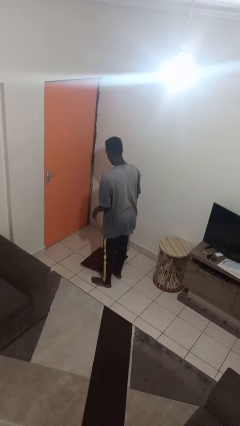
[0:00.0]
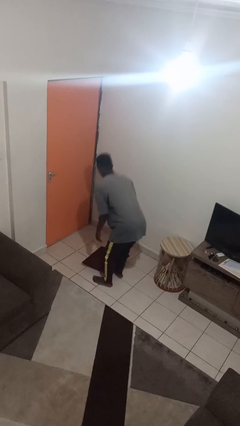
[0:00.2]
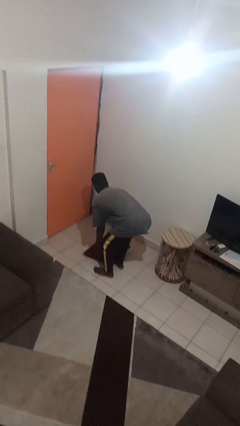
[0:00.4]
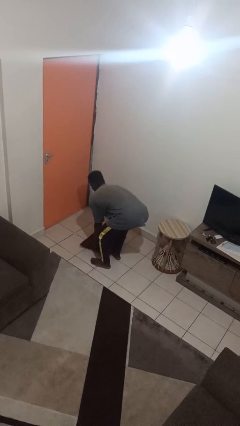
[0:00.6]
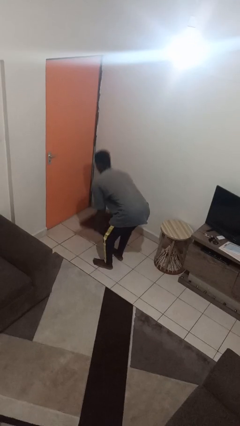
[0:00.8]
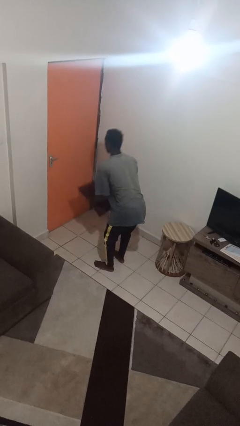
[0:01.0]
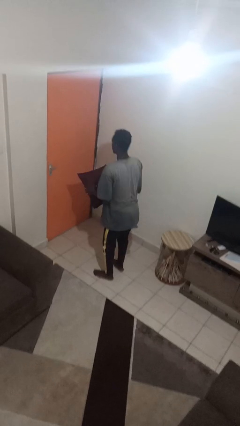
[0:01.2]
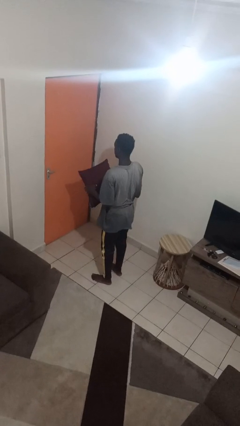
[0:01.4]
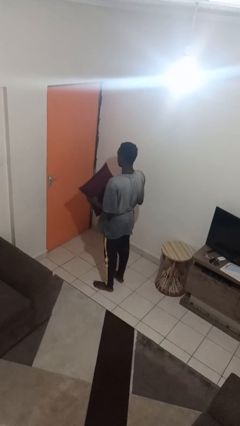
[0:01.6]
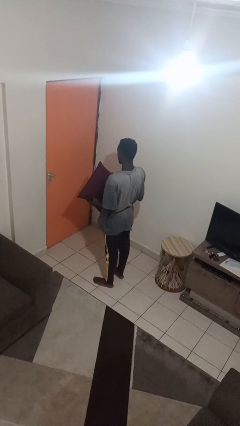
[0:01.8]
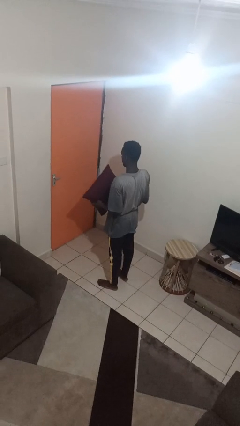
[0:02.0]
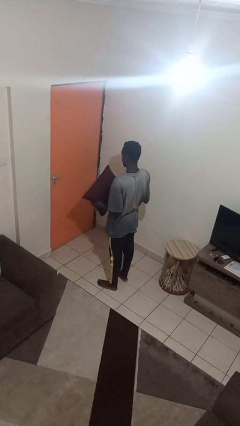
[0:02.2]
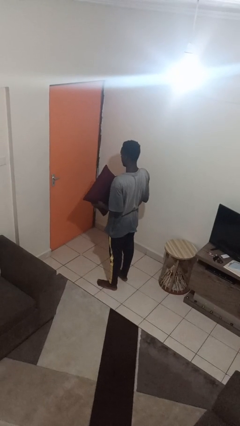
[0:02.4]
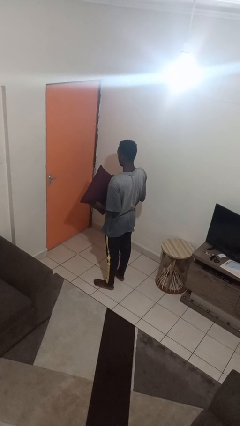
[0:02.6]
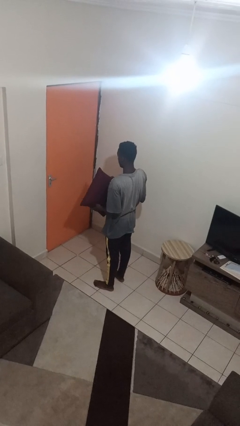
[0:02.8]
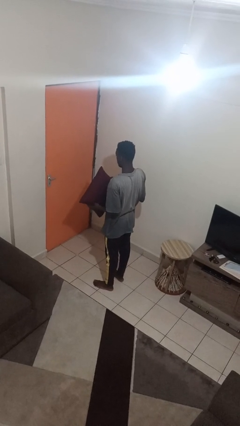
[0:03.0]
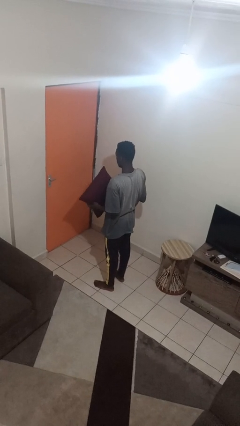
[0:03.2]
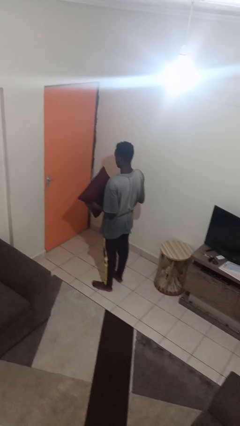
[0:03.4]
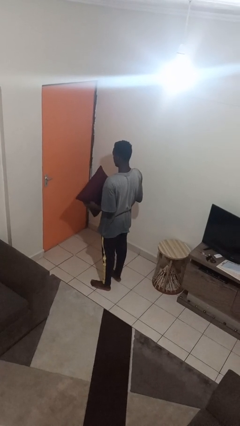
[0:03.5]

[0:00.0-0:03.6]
person picks up object from floor

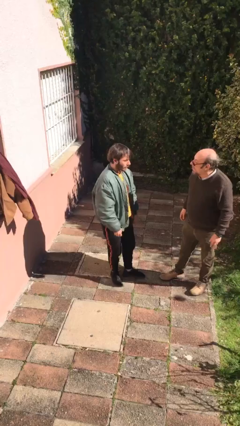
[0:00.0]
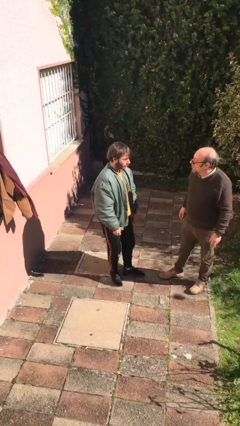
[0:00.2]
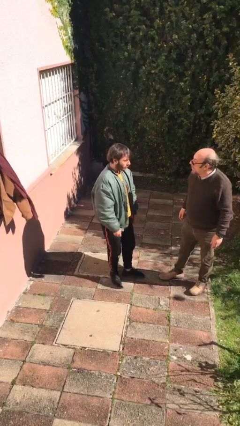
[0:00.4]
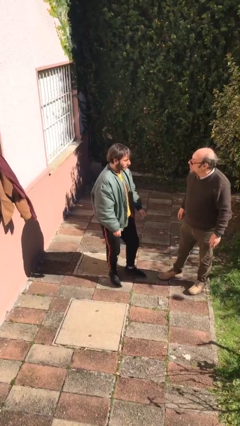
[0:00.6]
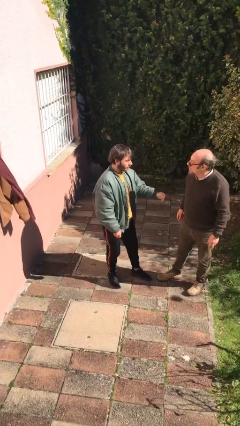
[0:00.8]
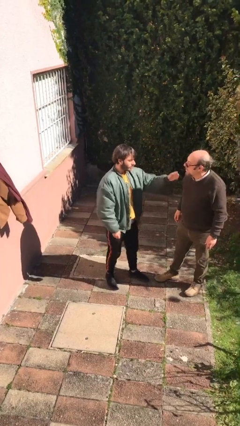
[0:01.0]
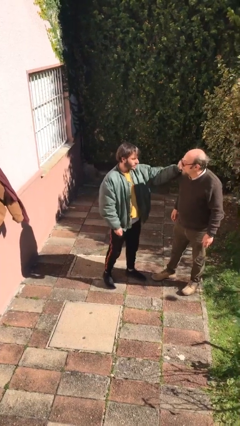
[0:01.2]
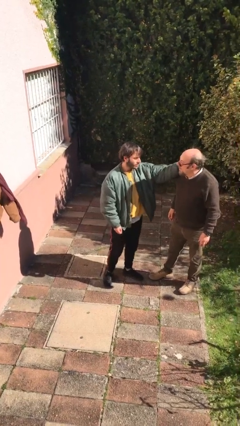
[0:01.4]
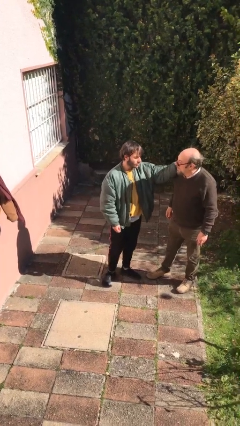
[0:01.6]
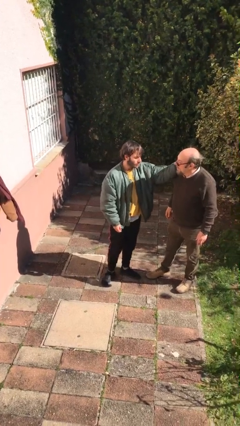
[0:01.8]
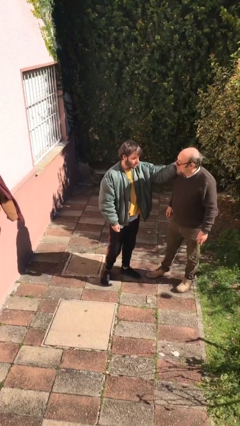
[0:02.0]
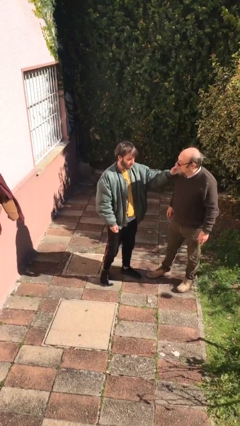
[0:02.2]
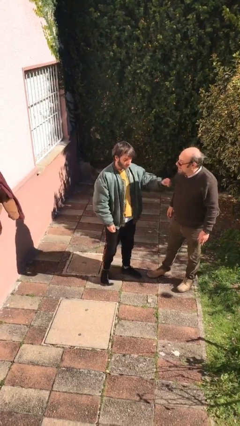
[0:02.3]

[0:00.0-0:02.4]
person touches face of person

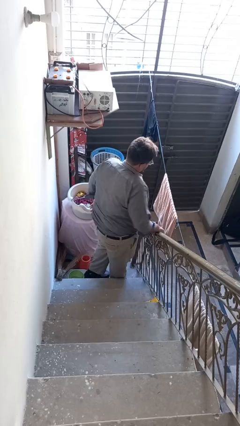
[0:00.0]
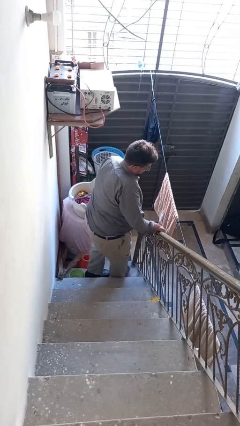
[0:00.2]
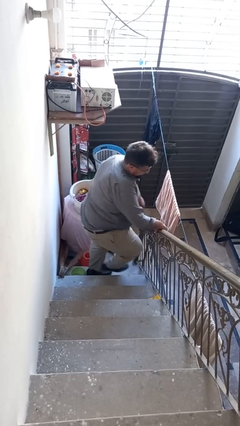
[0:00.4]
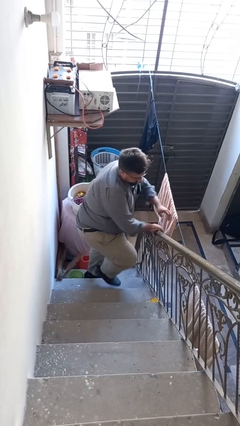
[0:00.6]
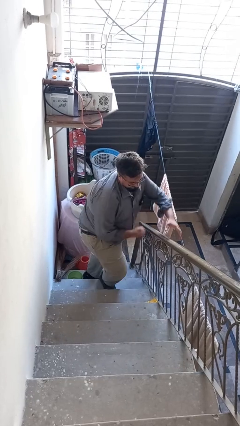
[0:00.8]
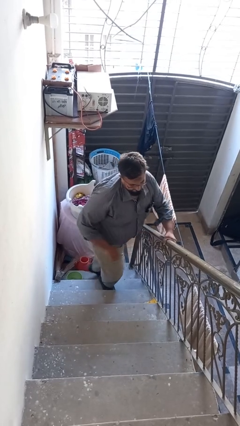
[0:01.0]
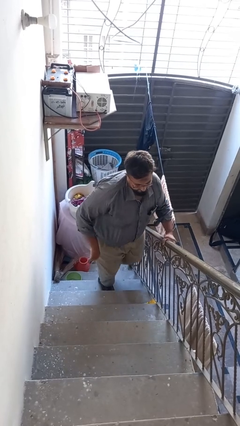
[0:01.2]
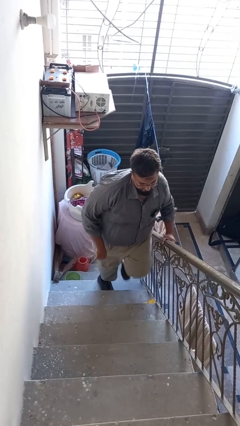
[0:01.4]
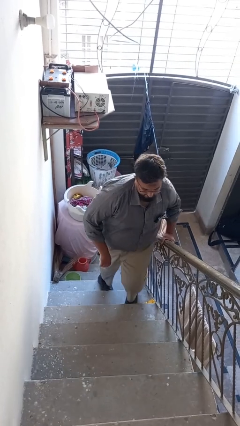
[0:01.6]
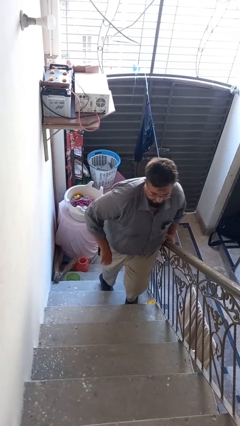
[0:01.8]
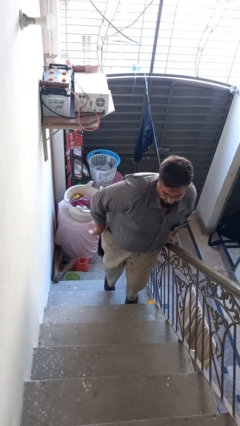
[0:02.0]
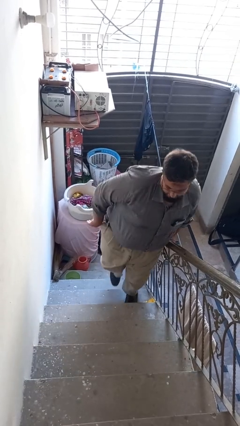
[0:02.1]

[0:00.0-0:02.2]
person climbs up stairs

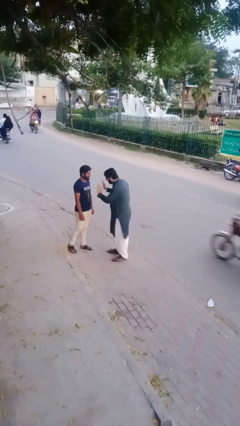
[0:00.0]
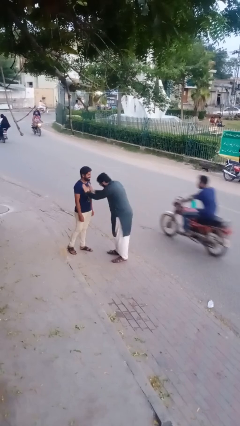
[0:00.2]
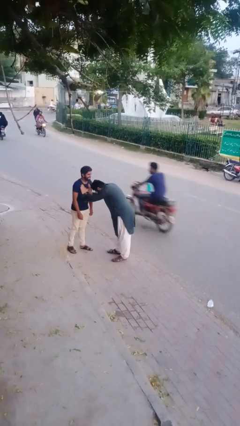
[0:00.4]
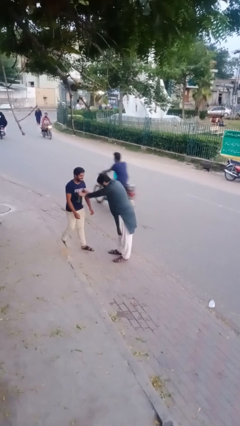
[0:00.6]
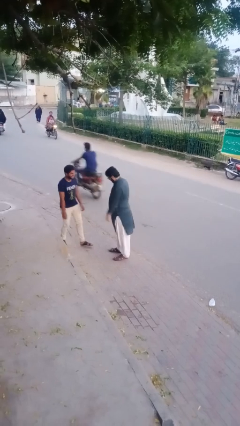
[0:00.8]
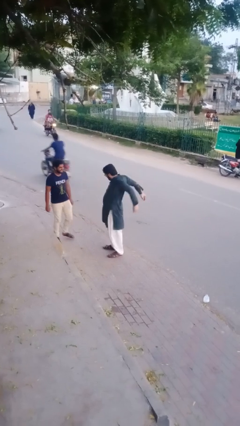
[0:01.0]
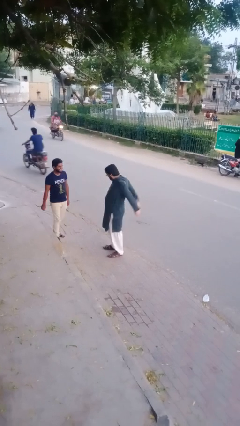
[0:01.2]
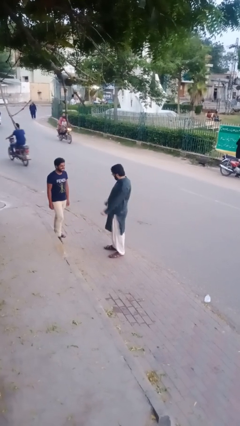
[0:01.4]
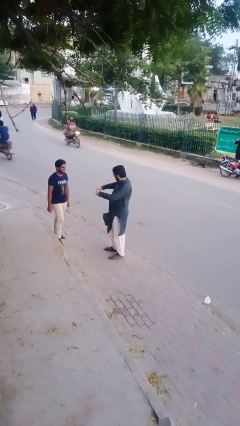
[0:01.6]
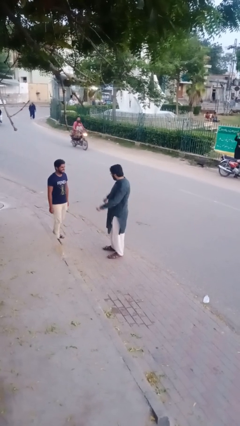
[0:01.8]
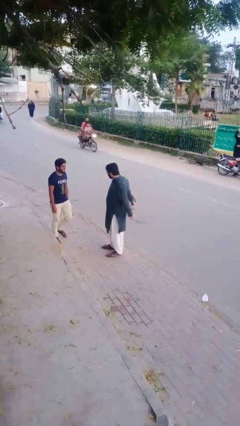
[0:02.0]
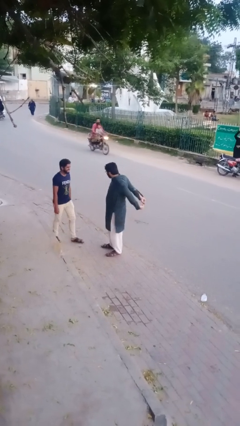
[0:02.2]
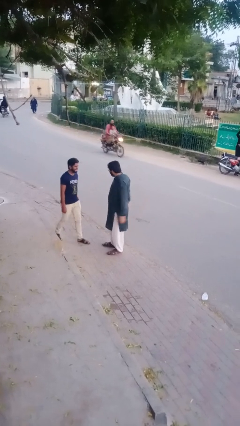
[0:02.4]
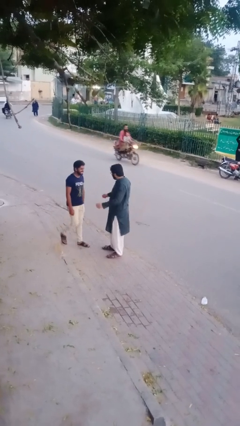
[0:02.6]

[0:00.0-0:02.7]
person shoves person

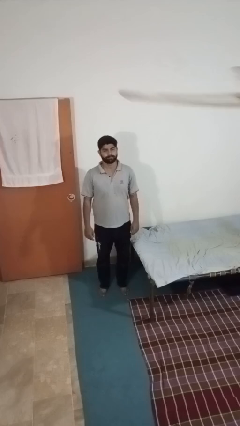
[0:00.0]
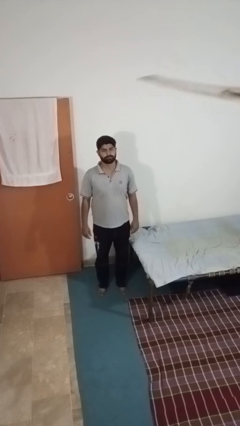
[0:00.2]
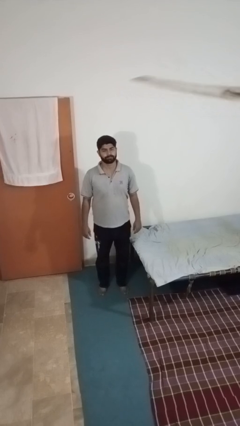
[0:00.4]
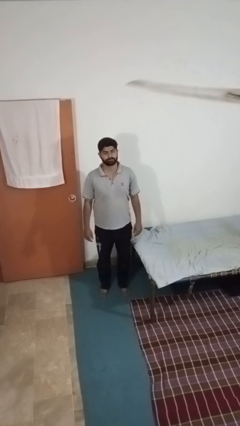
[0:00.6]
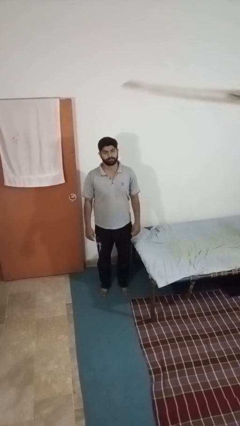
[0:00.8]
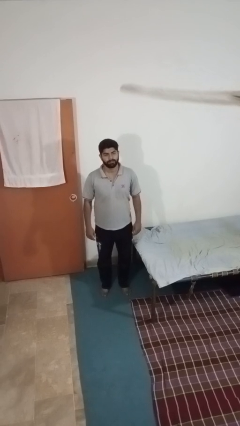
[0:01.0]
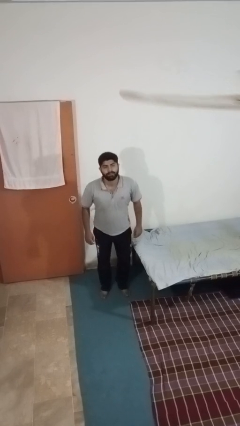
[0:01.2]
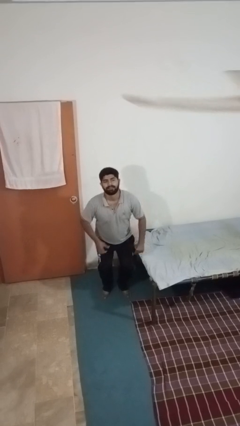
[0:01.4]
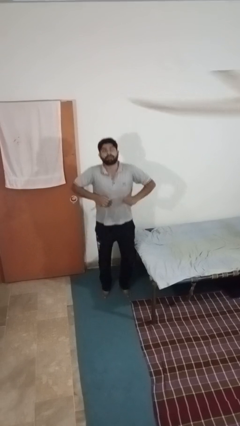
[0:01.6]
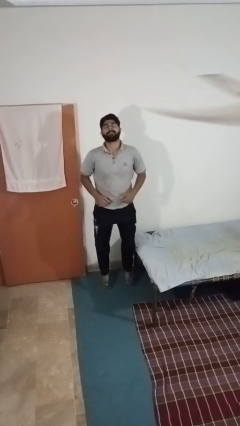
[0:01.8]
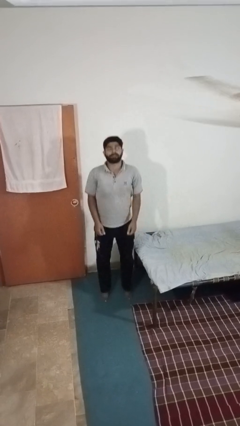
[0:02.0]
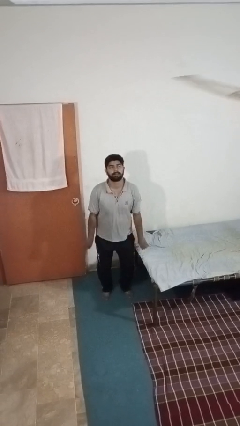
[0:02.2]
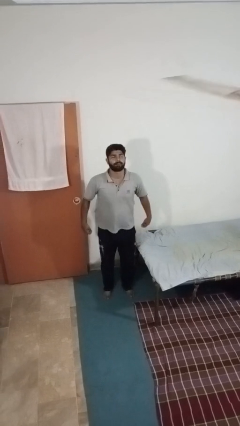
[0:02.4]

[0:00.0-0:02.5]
person jumps

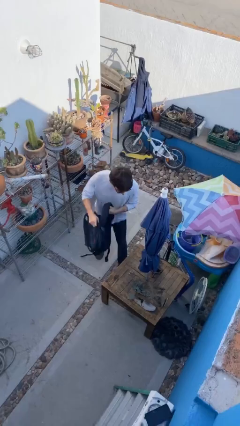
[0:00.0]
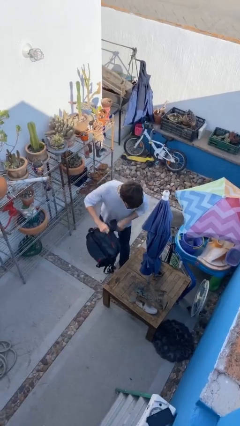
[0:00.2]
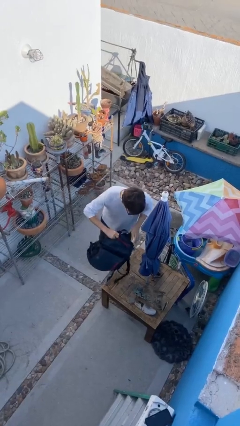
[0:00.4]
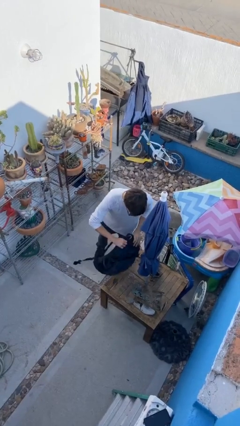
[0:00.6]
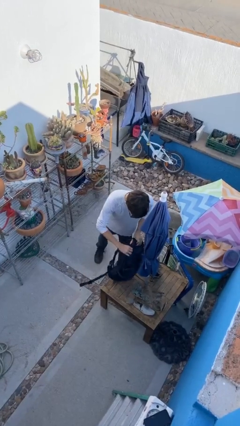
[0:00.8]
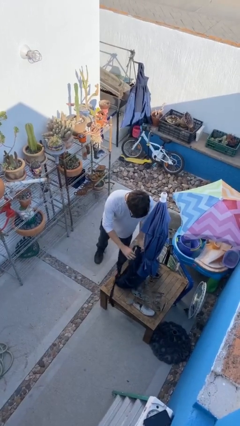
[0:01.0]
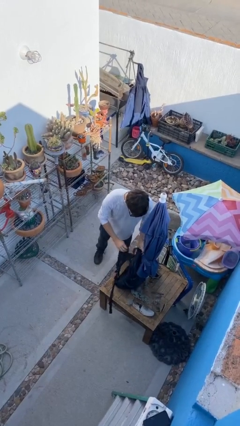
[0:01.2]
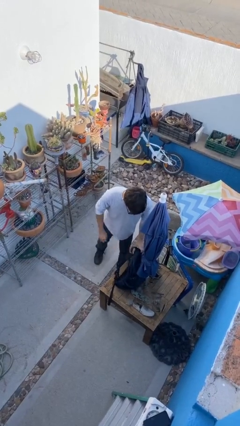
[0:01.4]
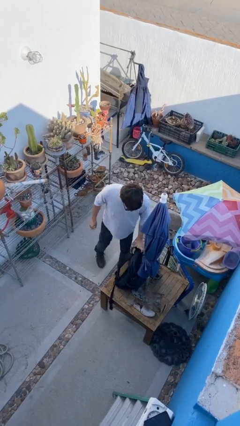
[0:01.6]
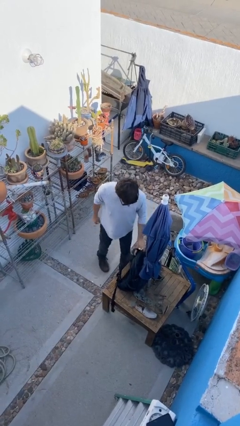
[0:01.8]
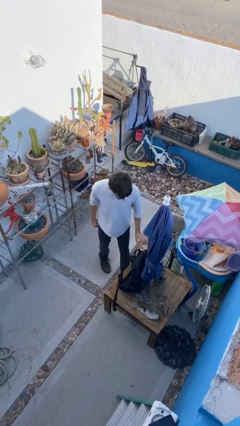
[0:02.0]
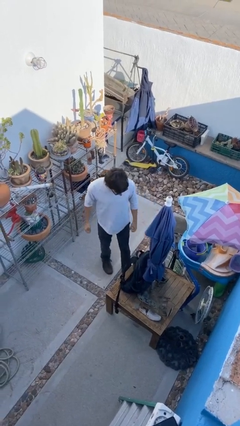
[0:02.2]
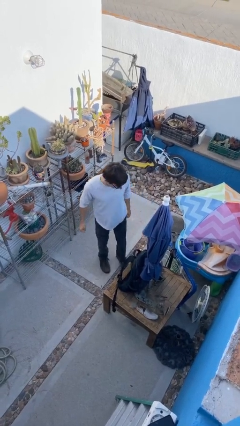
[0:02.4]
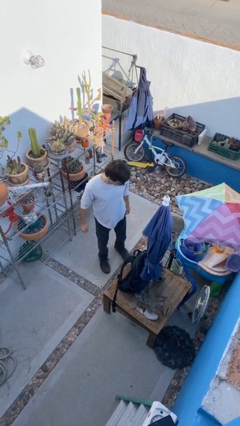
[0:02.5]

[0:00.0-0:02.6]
person puts down object on table

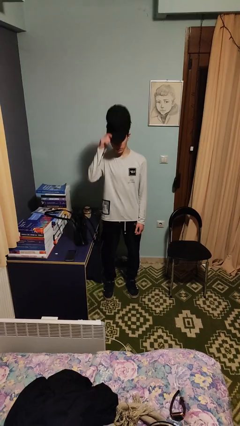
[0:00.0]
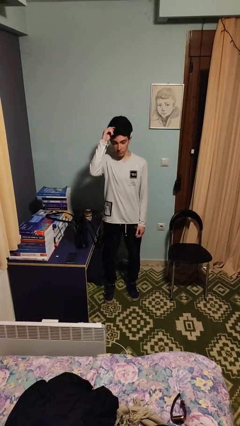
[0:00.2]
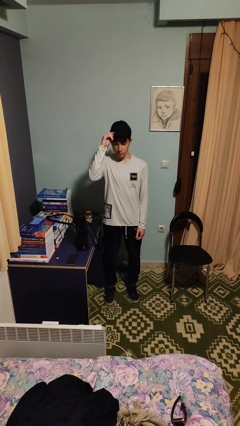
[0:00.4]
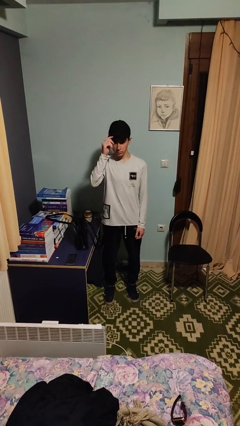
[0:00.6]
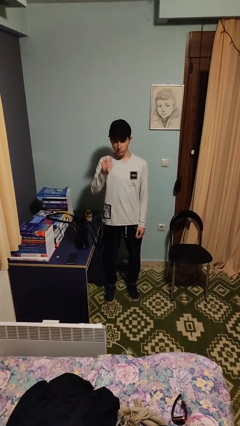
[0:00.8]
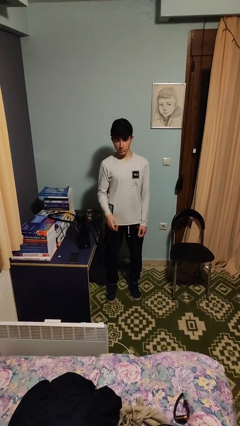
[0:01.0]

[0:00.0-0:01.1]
person puts on hat

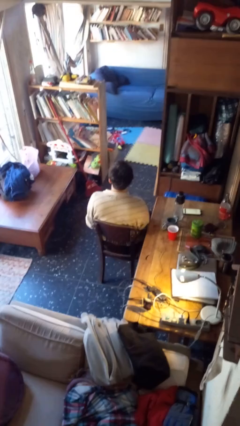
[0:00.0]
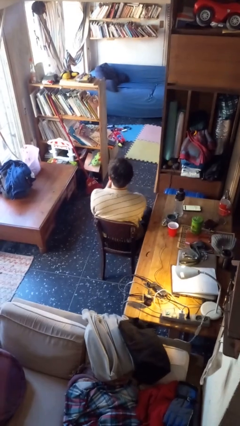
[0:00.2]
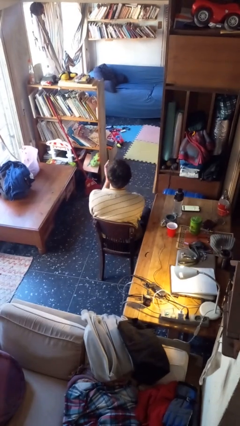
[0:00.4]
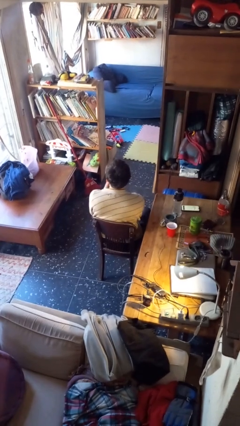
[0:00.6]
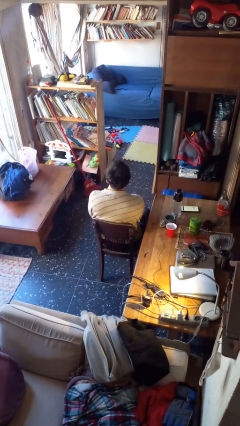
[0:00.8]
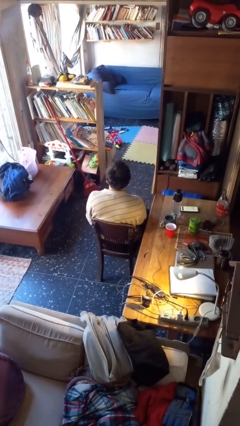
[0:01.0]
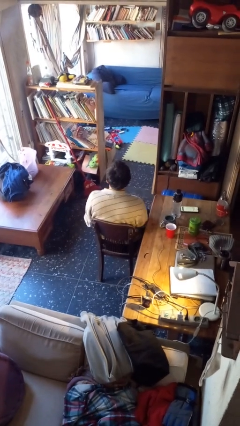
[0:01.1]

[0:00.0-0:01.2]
person claps hands